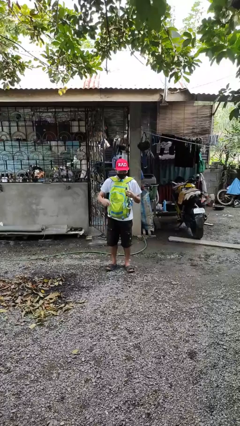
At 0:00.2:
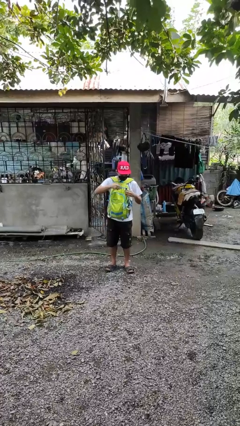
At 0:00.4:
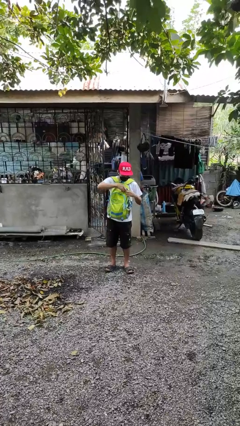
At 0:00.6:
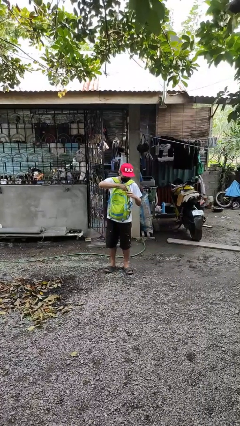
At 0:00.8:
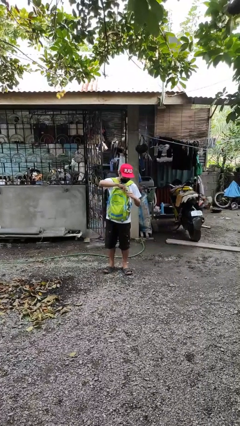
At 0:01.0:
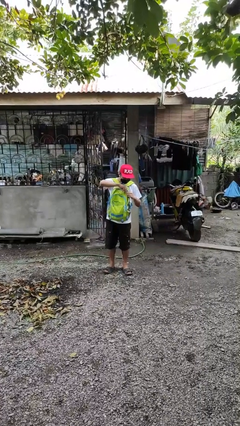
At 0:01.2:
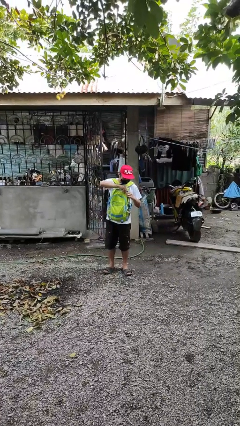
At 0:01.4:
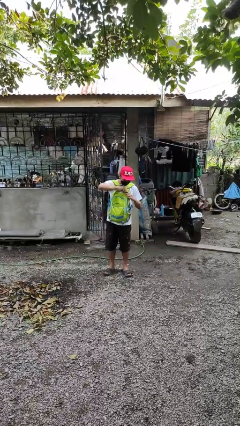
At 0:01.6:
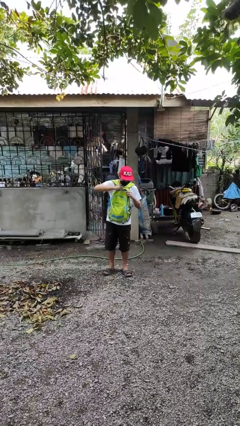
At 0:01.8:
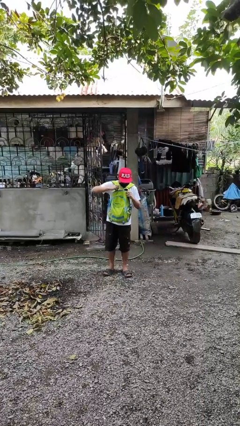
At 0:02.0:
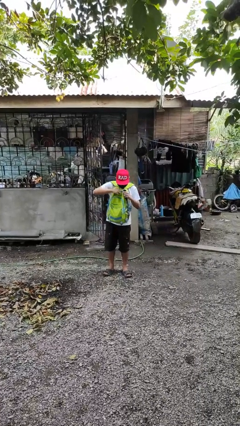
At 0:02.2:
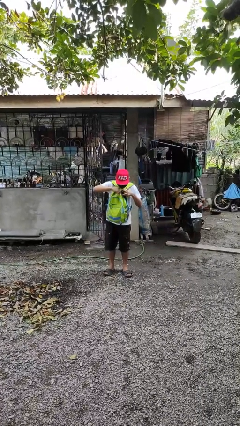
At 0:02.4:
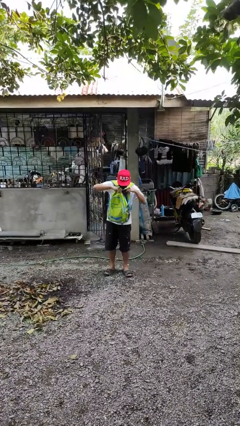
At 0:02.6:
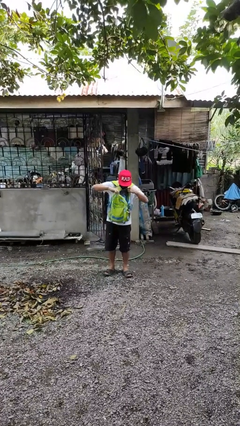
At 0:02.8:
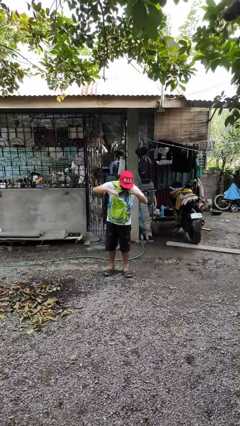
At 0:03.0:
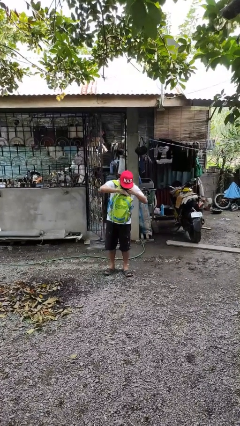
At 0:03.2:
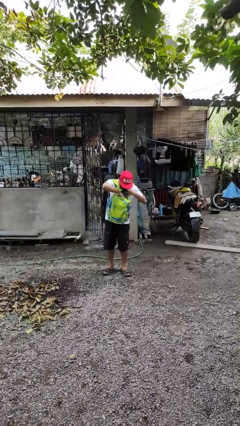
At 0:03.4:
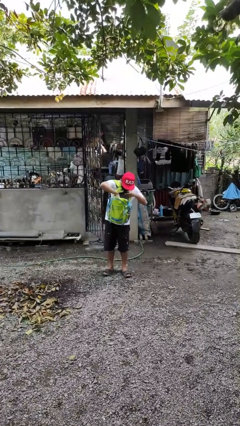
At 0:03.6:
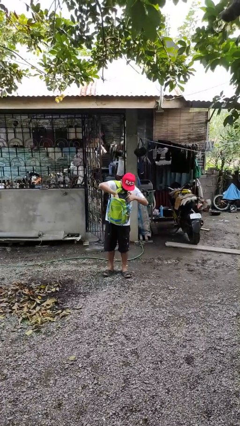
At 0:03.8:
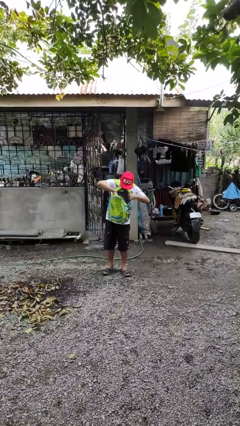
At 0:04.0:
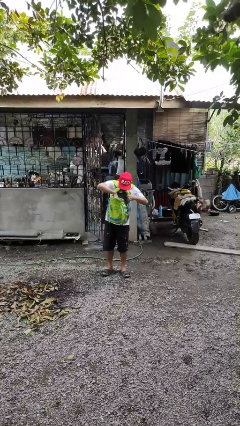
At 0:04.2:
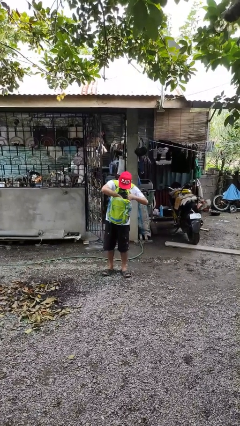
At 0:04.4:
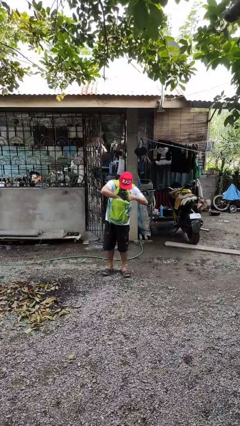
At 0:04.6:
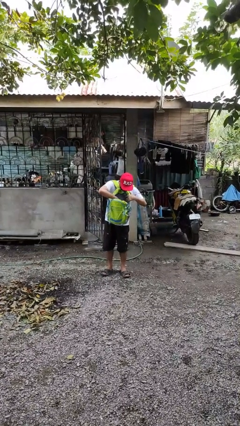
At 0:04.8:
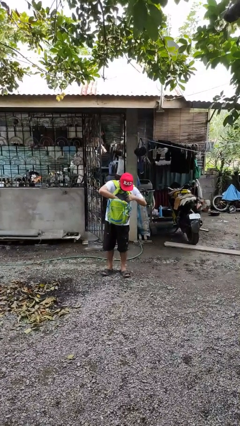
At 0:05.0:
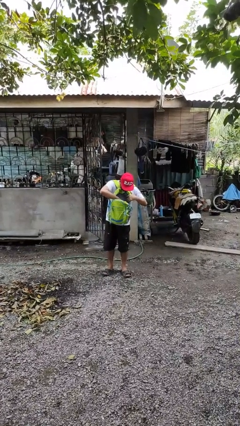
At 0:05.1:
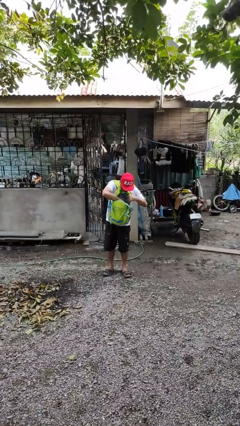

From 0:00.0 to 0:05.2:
person searches in backpack

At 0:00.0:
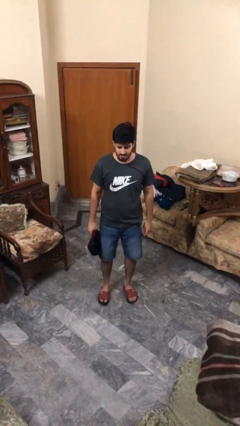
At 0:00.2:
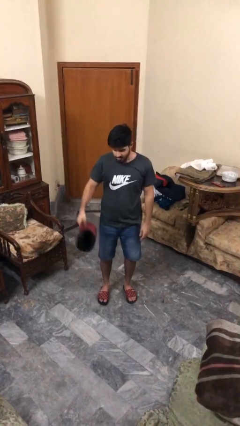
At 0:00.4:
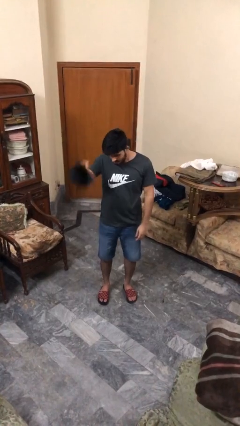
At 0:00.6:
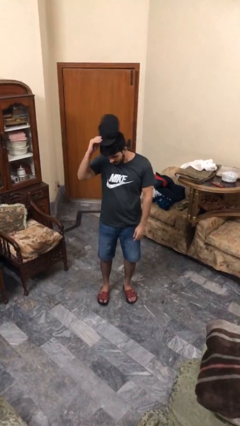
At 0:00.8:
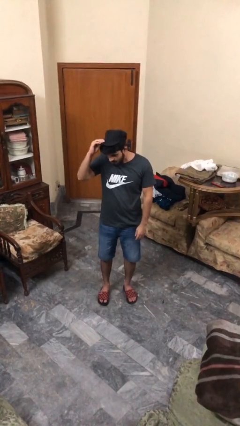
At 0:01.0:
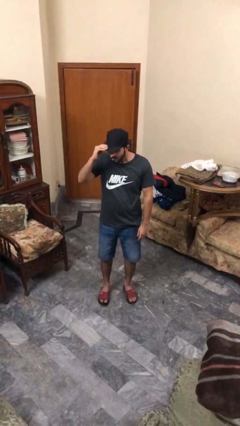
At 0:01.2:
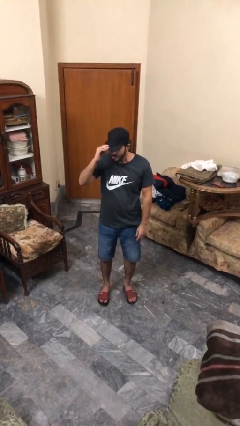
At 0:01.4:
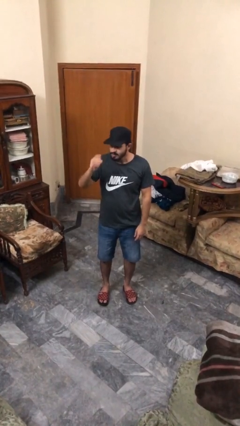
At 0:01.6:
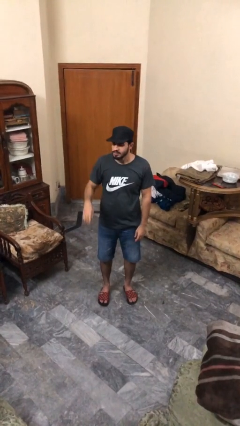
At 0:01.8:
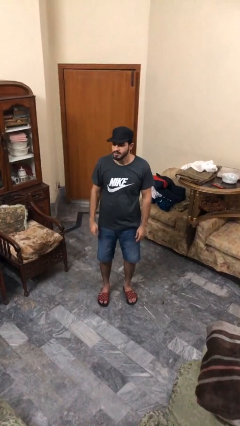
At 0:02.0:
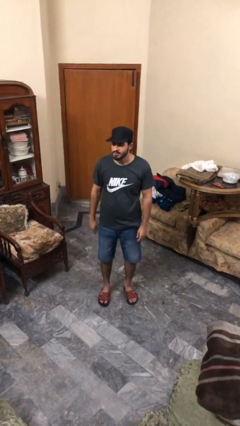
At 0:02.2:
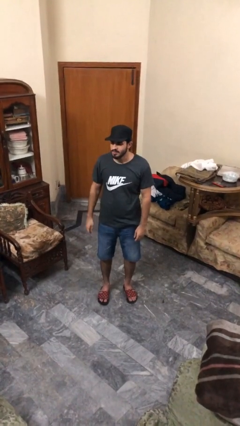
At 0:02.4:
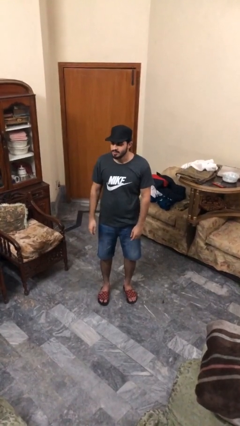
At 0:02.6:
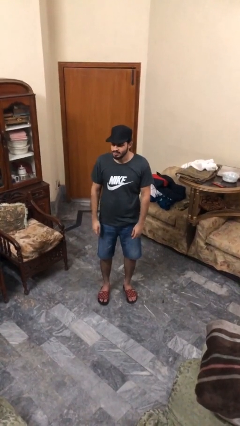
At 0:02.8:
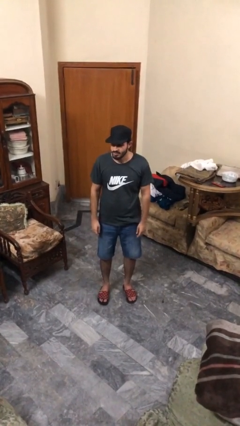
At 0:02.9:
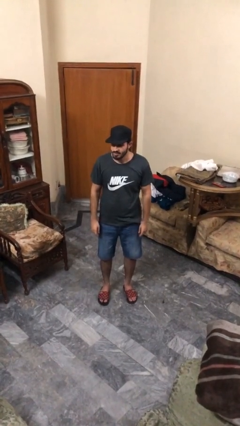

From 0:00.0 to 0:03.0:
person puts on hat

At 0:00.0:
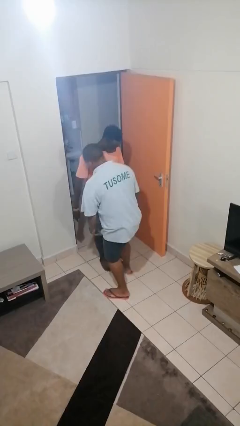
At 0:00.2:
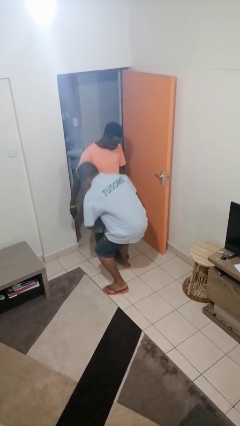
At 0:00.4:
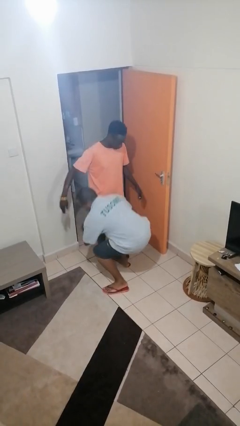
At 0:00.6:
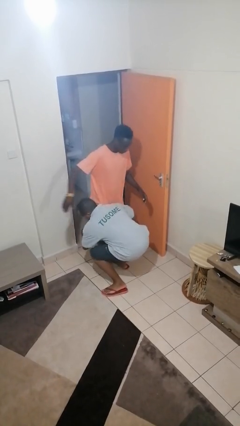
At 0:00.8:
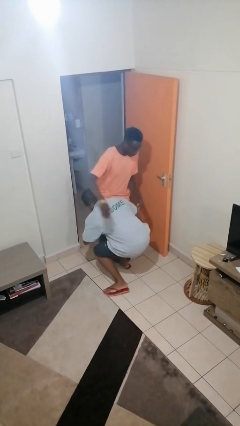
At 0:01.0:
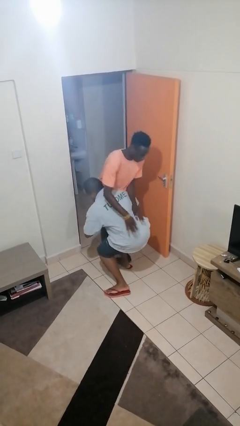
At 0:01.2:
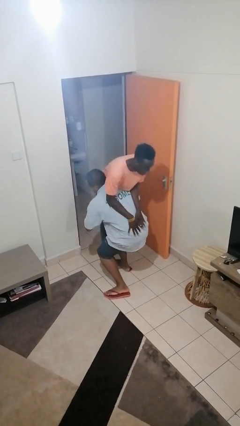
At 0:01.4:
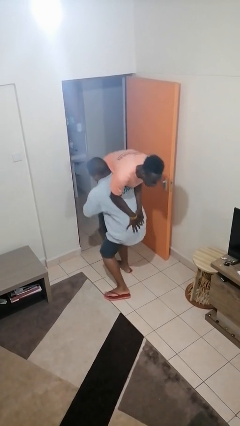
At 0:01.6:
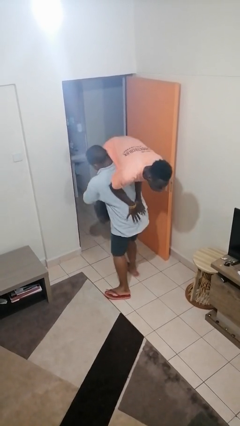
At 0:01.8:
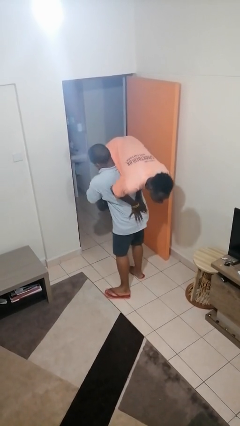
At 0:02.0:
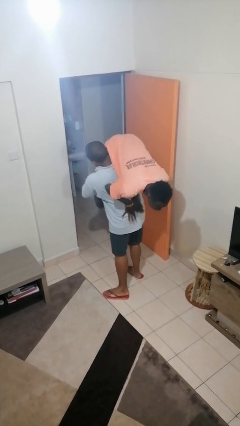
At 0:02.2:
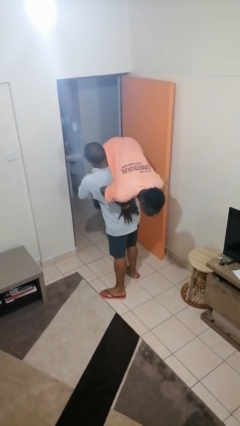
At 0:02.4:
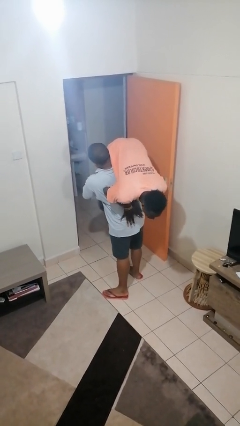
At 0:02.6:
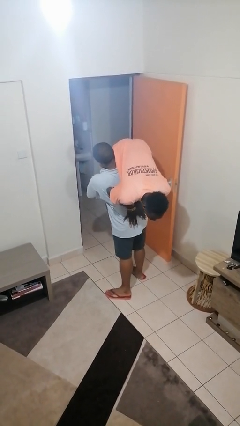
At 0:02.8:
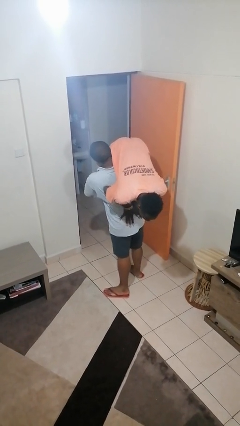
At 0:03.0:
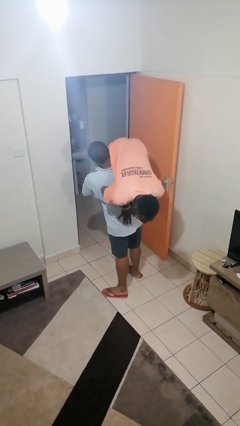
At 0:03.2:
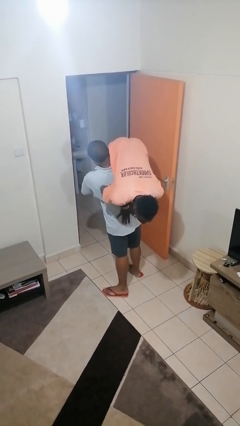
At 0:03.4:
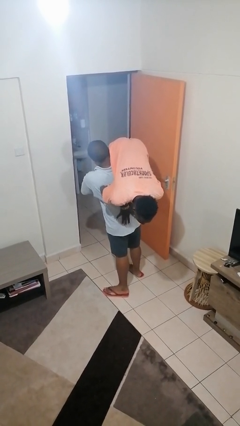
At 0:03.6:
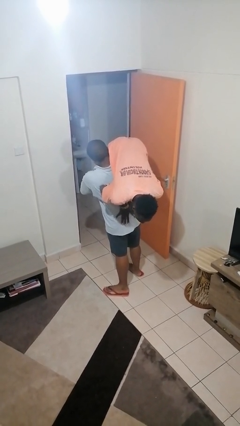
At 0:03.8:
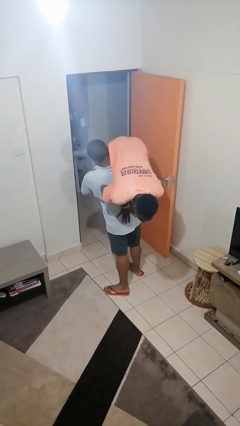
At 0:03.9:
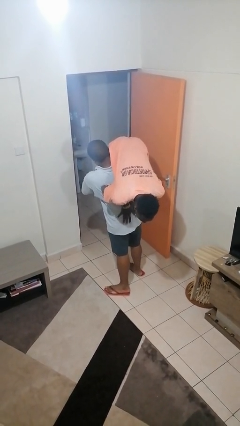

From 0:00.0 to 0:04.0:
person carries person over shoulder

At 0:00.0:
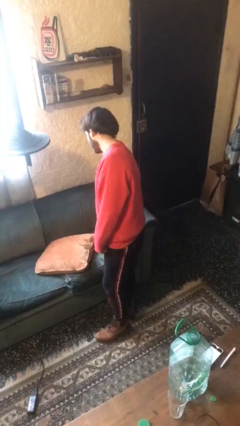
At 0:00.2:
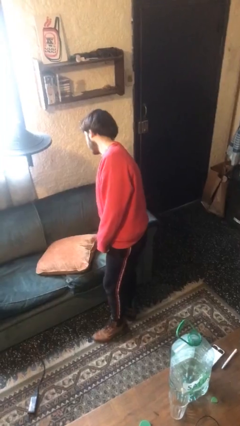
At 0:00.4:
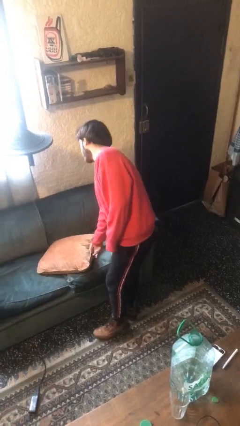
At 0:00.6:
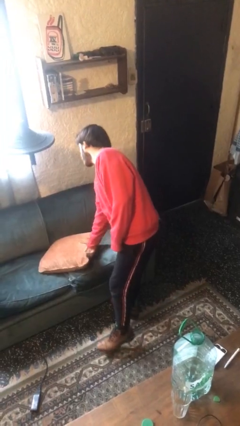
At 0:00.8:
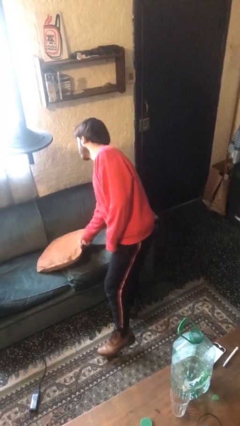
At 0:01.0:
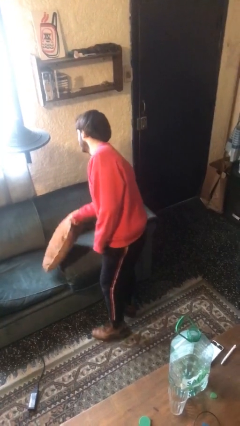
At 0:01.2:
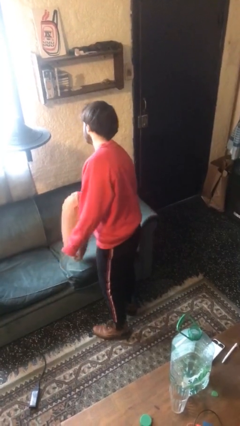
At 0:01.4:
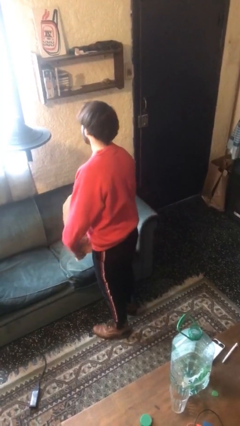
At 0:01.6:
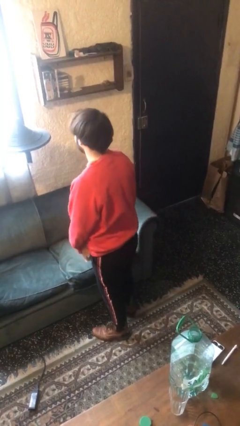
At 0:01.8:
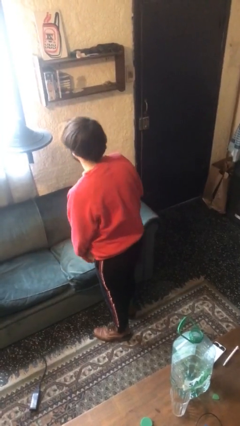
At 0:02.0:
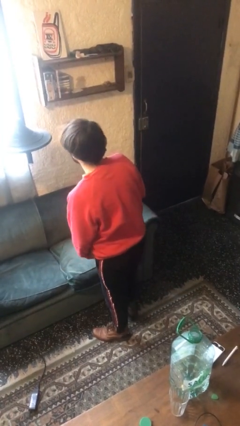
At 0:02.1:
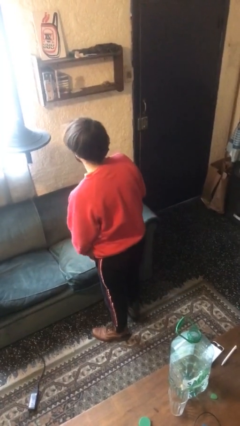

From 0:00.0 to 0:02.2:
person picks up object from couch

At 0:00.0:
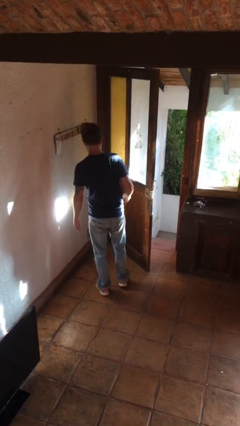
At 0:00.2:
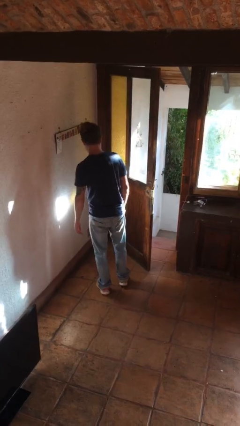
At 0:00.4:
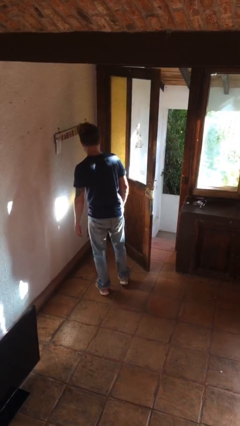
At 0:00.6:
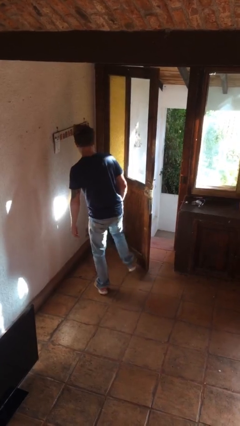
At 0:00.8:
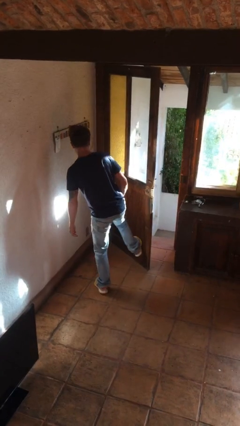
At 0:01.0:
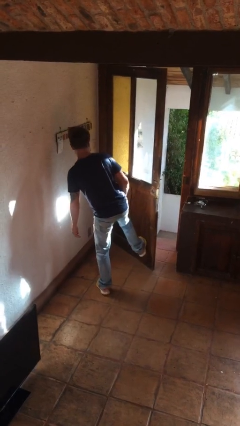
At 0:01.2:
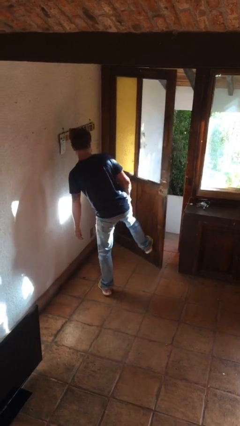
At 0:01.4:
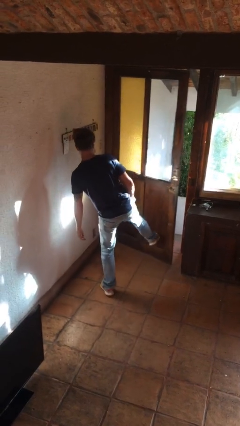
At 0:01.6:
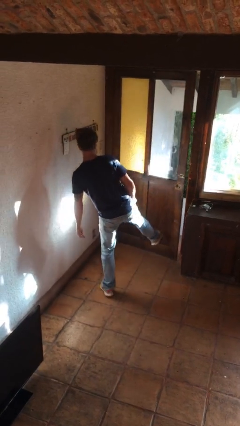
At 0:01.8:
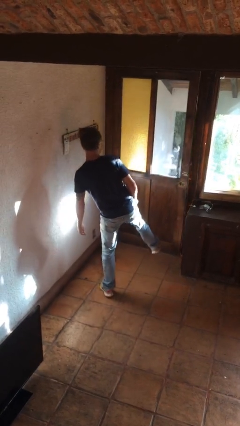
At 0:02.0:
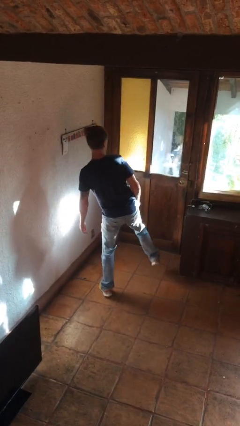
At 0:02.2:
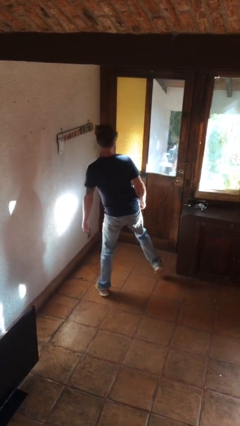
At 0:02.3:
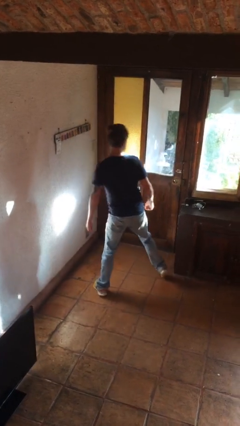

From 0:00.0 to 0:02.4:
person closes door with foot
